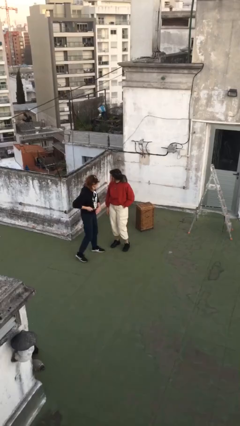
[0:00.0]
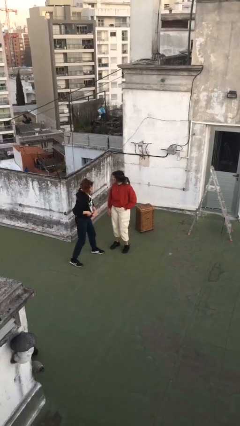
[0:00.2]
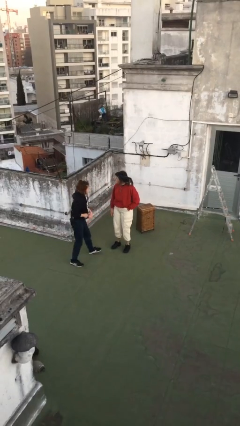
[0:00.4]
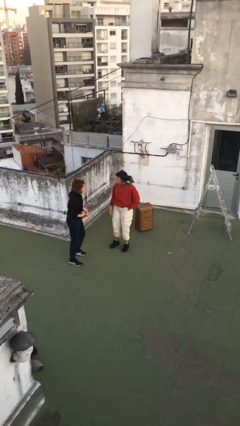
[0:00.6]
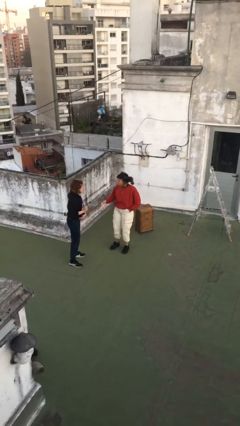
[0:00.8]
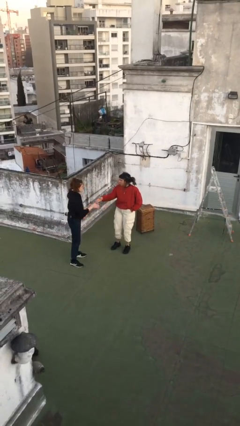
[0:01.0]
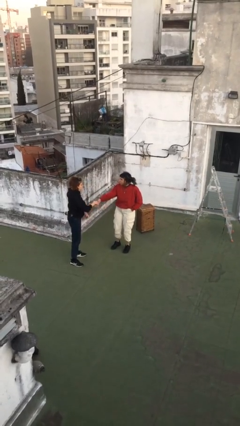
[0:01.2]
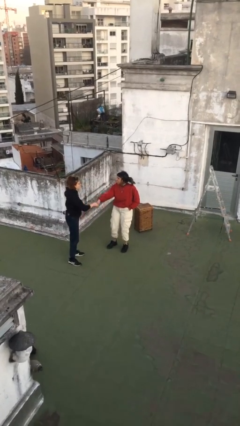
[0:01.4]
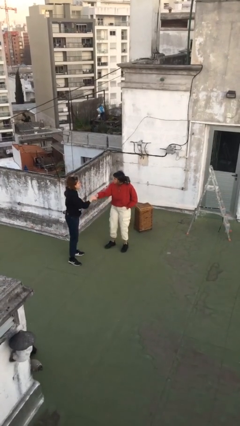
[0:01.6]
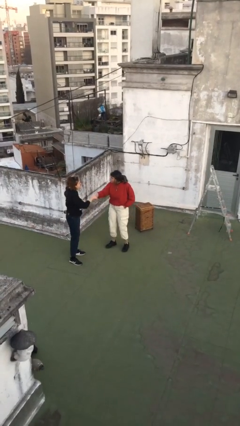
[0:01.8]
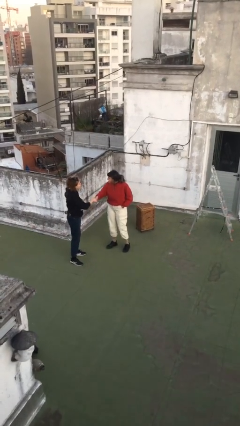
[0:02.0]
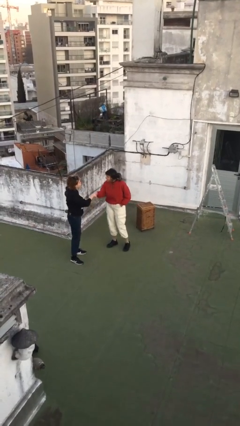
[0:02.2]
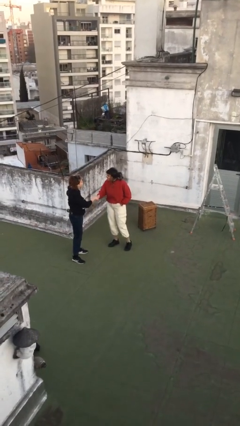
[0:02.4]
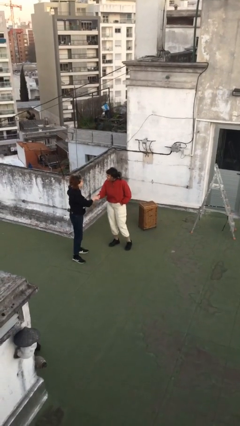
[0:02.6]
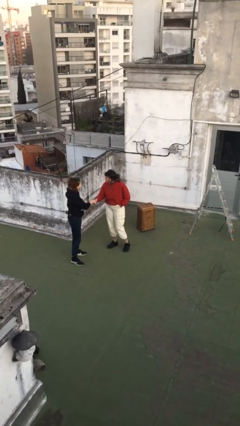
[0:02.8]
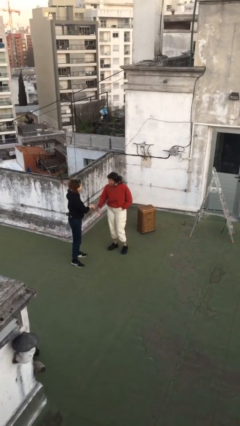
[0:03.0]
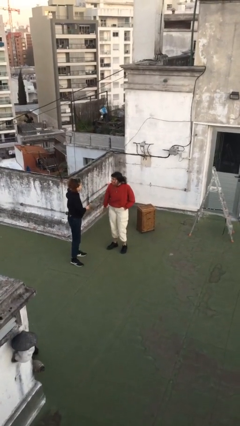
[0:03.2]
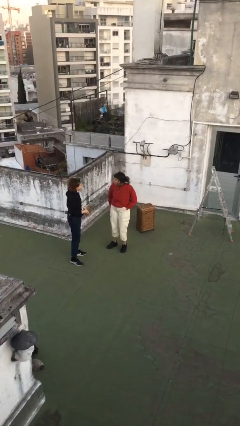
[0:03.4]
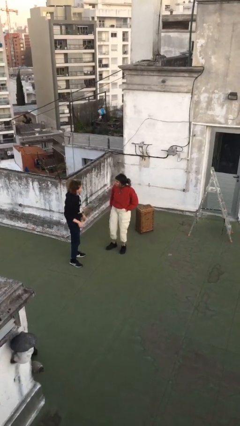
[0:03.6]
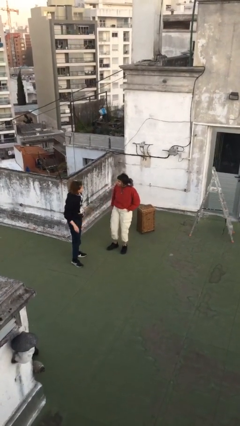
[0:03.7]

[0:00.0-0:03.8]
person shakes hand

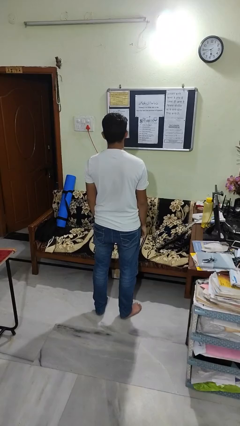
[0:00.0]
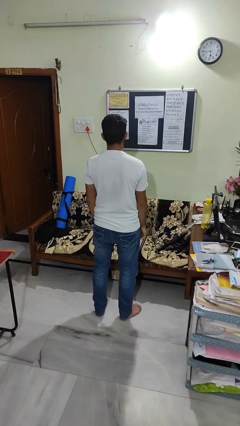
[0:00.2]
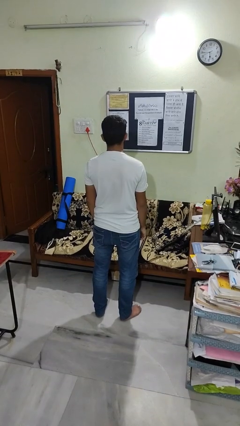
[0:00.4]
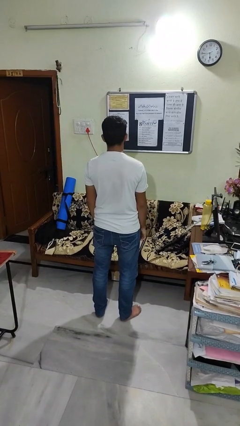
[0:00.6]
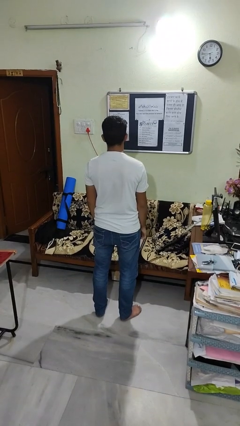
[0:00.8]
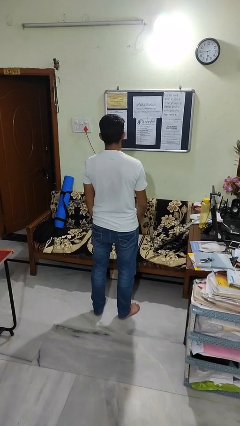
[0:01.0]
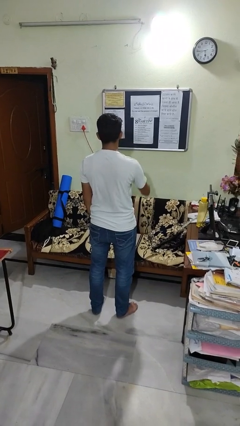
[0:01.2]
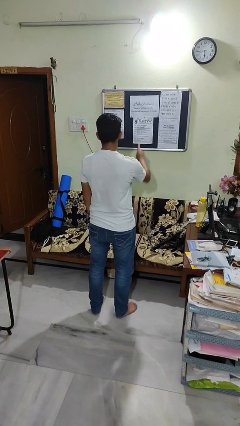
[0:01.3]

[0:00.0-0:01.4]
person gestures number one

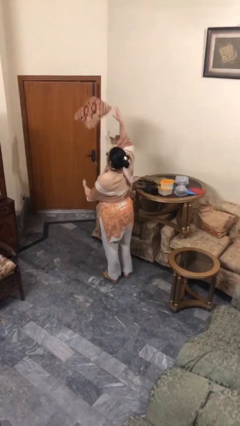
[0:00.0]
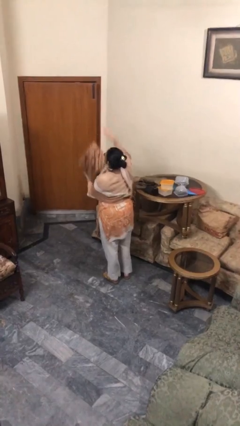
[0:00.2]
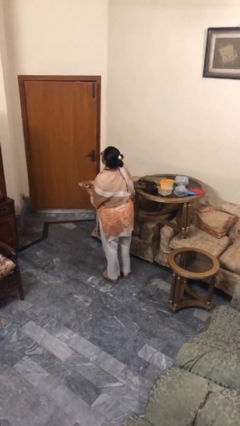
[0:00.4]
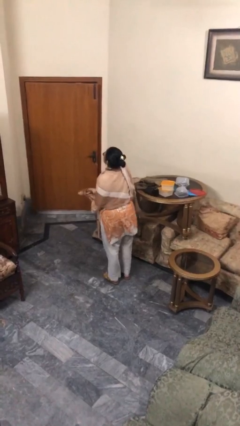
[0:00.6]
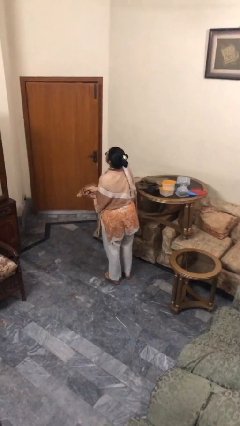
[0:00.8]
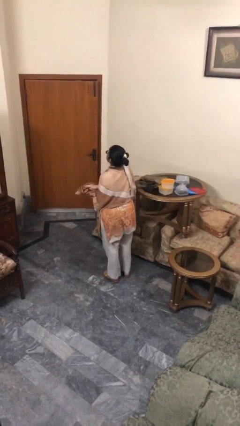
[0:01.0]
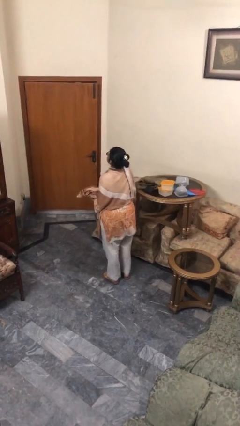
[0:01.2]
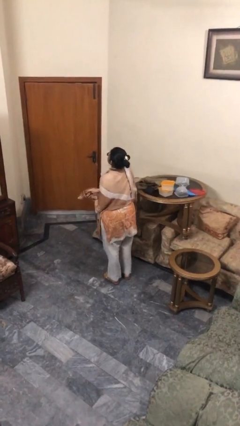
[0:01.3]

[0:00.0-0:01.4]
person catches dropped object

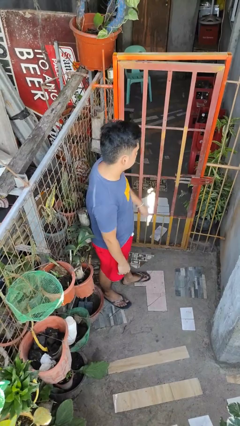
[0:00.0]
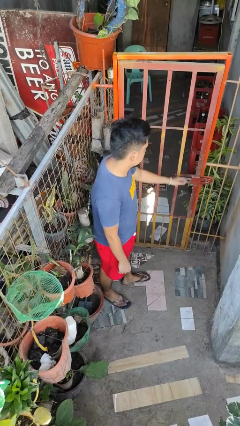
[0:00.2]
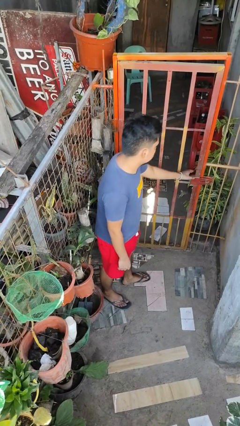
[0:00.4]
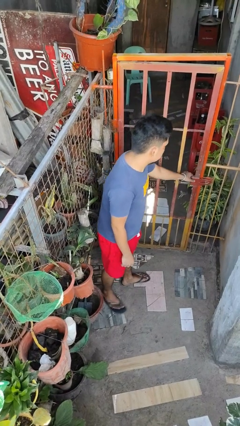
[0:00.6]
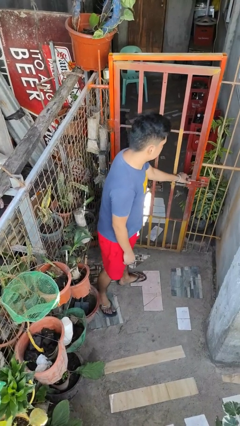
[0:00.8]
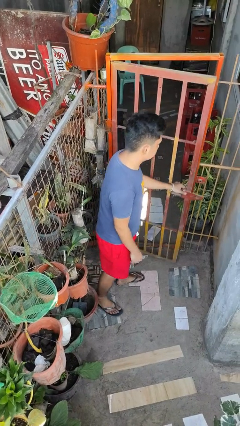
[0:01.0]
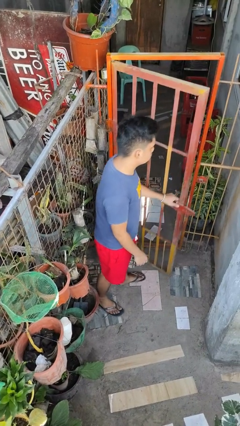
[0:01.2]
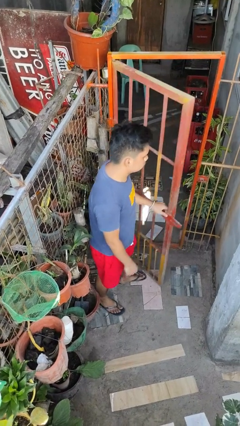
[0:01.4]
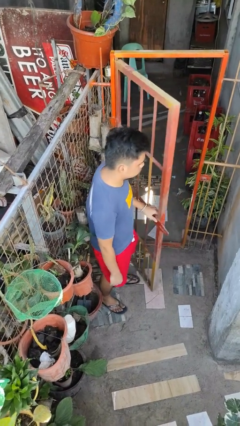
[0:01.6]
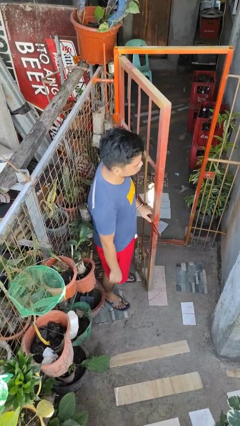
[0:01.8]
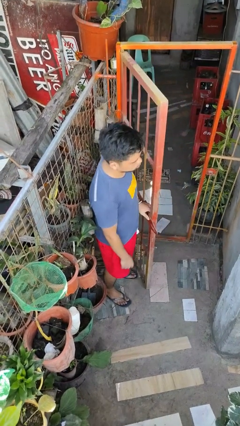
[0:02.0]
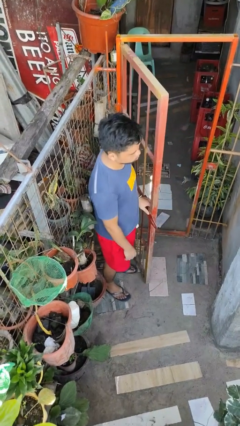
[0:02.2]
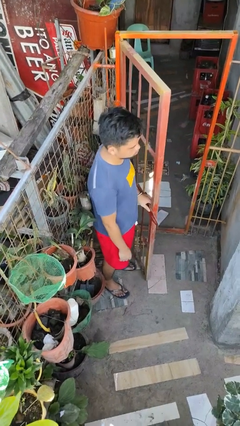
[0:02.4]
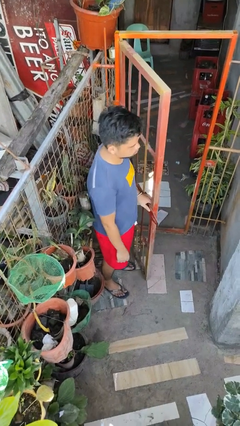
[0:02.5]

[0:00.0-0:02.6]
person opens gate

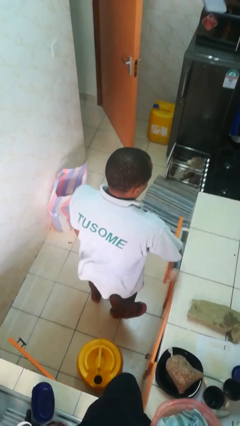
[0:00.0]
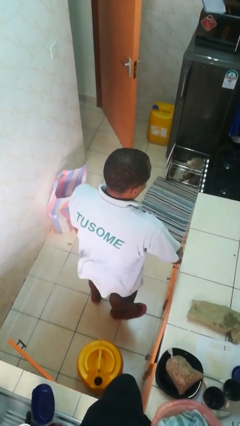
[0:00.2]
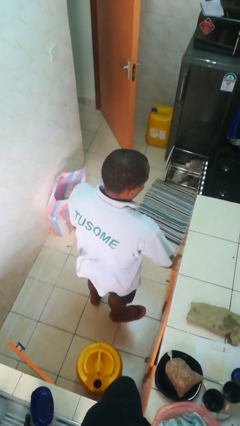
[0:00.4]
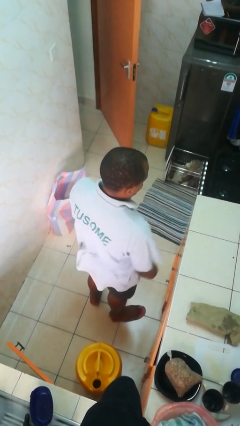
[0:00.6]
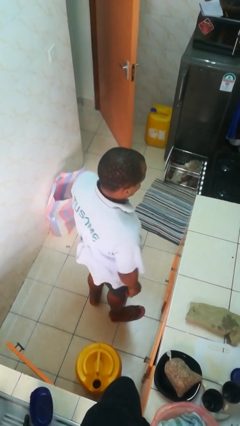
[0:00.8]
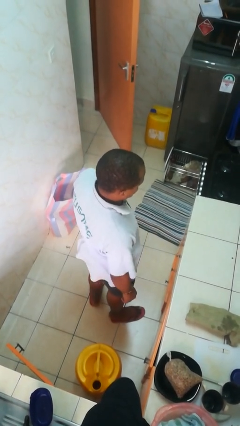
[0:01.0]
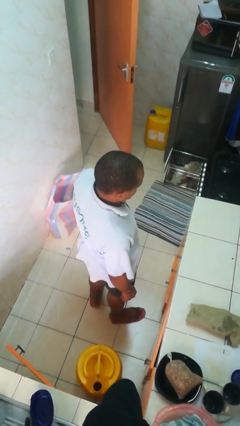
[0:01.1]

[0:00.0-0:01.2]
person closes kitchen drawer

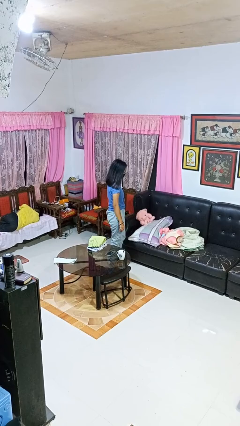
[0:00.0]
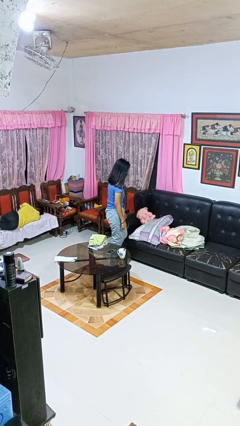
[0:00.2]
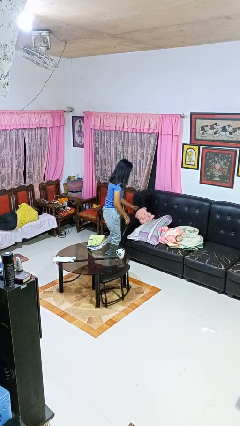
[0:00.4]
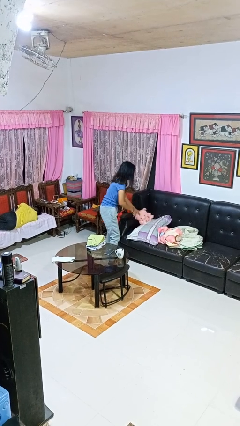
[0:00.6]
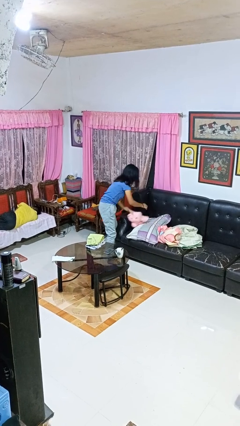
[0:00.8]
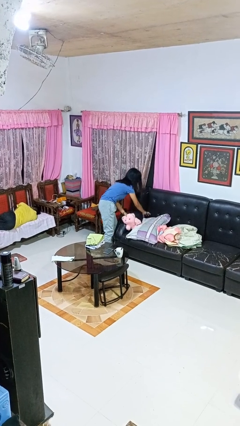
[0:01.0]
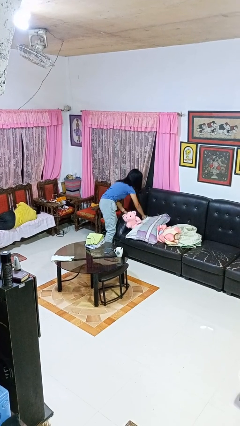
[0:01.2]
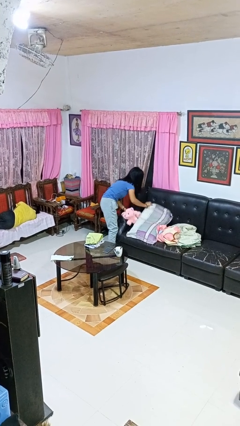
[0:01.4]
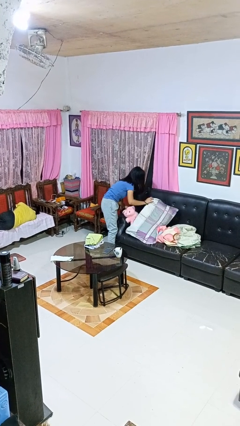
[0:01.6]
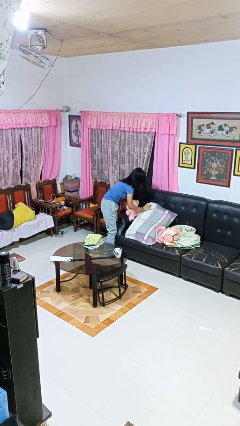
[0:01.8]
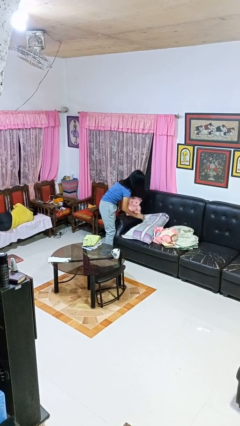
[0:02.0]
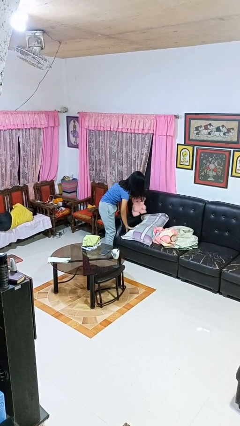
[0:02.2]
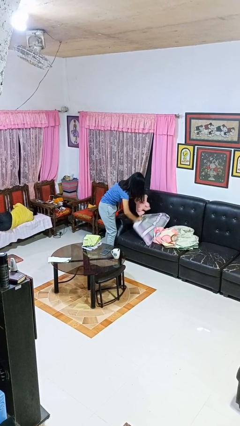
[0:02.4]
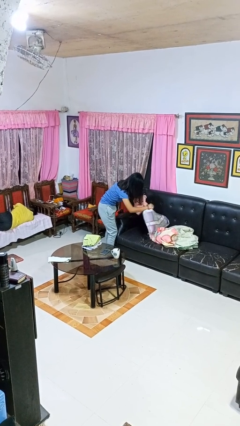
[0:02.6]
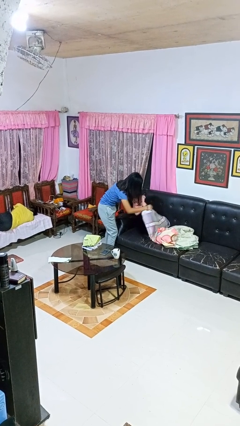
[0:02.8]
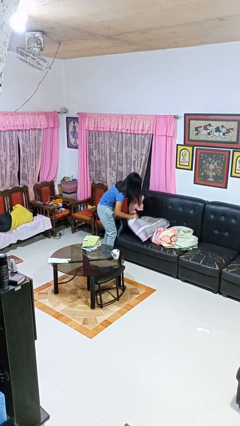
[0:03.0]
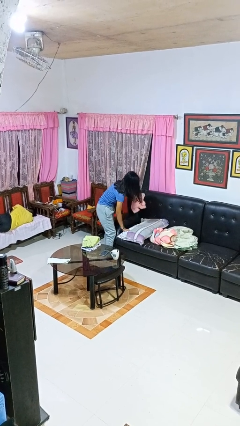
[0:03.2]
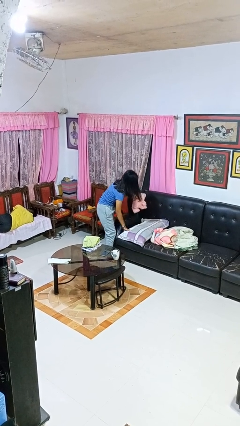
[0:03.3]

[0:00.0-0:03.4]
person searches in couch

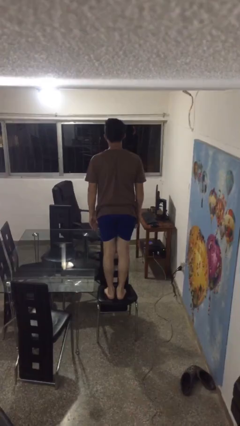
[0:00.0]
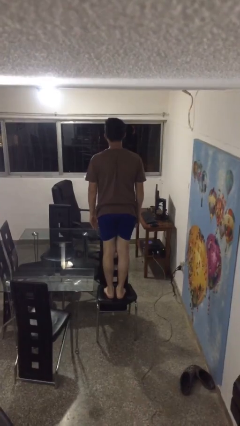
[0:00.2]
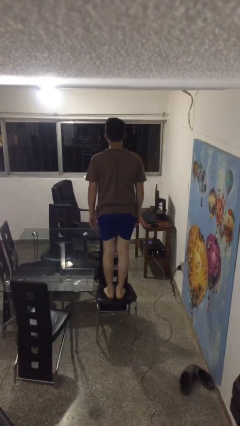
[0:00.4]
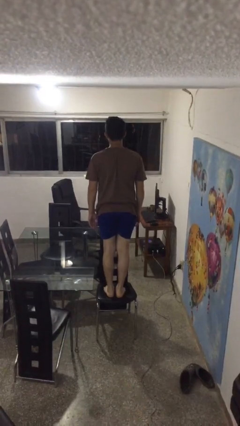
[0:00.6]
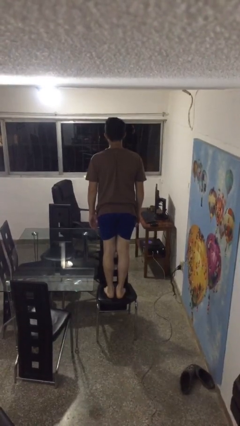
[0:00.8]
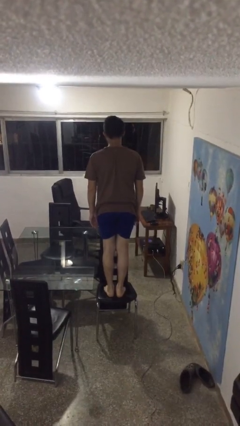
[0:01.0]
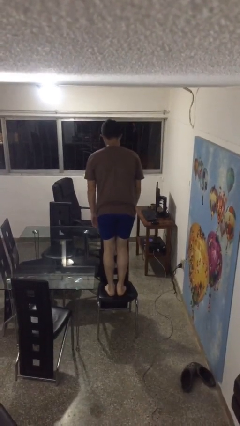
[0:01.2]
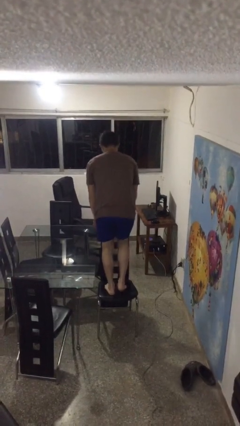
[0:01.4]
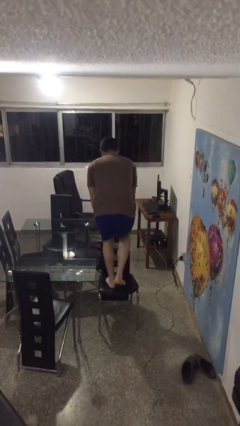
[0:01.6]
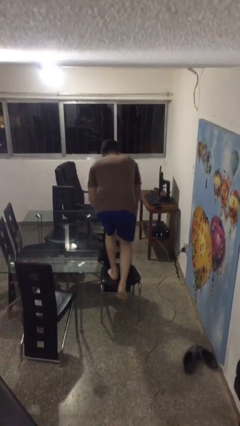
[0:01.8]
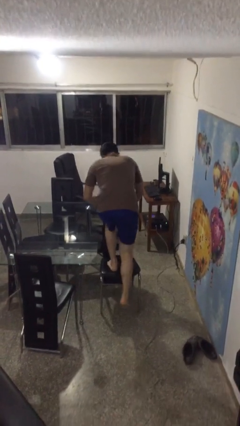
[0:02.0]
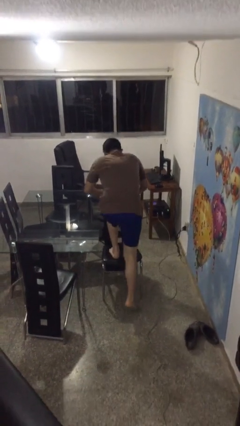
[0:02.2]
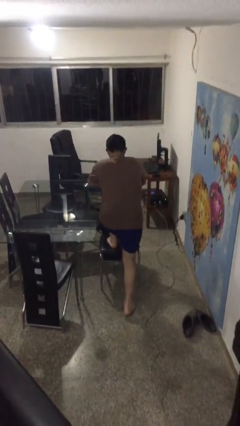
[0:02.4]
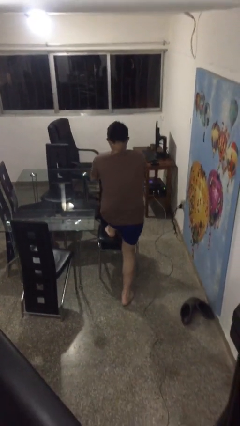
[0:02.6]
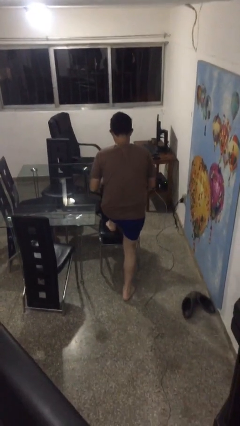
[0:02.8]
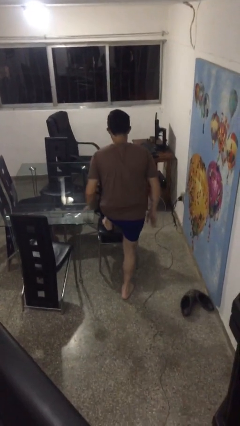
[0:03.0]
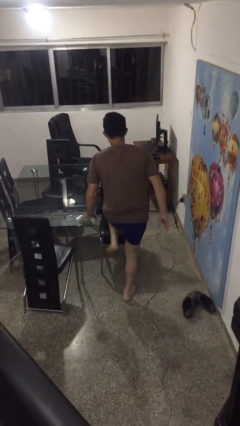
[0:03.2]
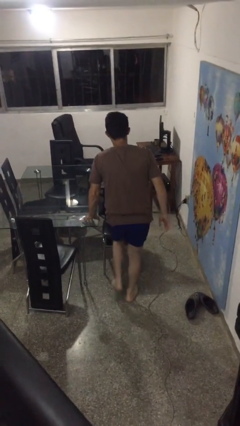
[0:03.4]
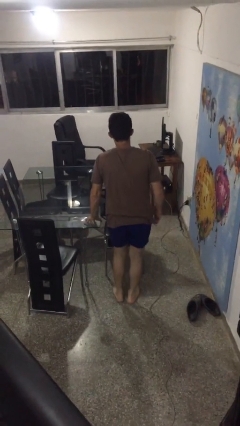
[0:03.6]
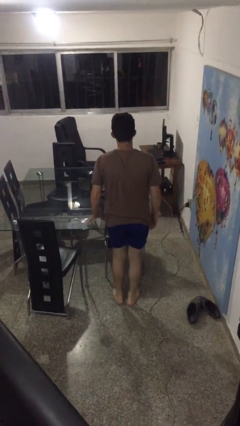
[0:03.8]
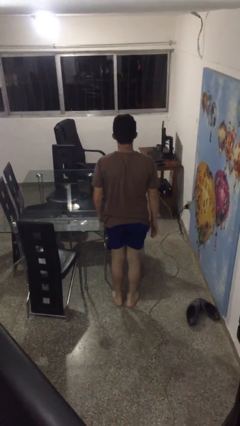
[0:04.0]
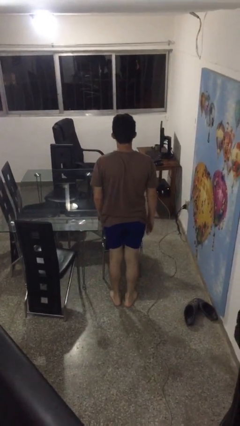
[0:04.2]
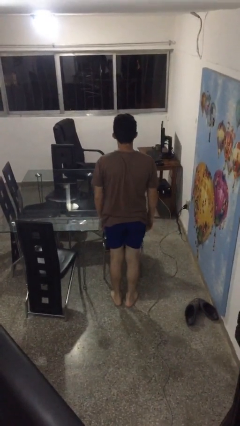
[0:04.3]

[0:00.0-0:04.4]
person climbs off chair
